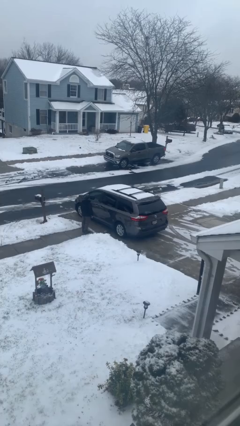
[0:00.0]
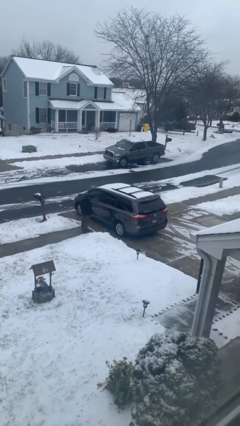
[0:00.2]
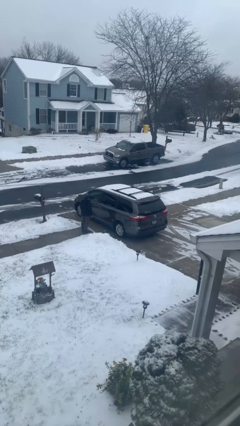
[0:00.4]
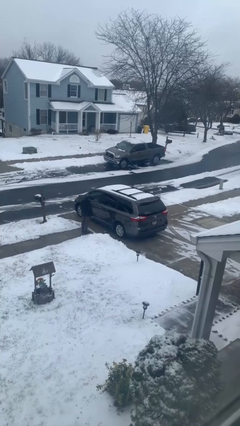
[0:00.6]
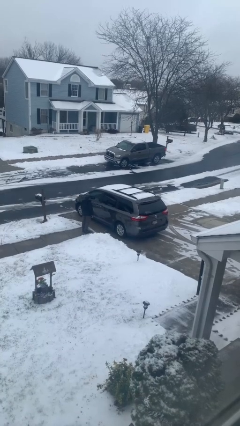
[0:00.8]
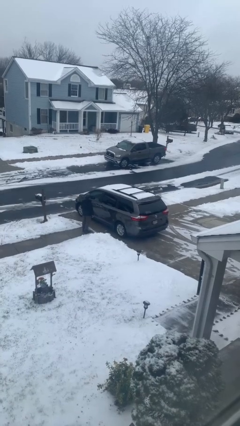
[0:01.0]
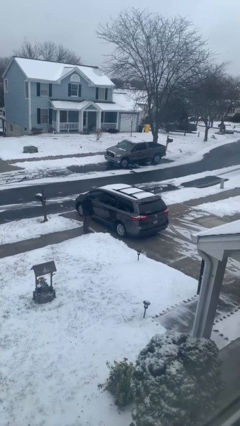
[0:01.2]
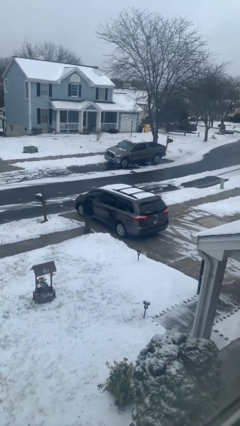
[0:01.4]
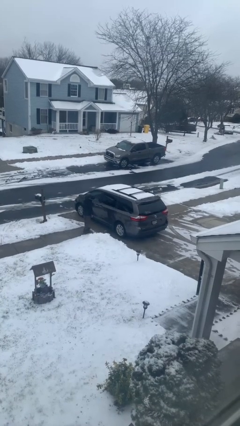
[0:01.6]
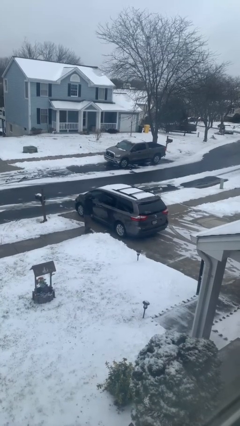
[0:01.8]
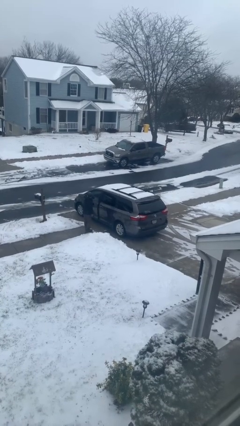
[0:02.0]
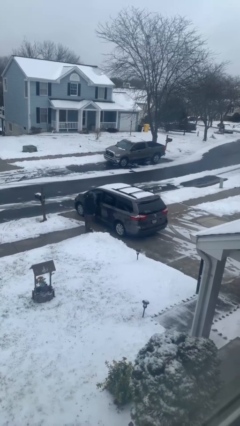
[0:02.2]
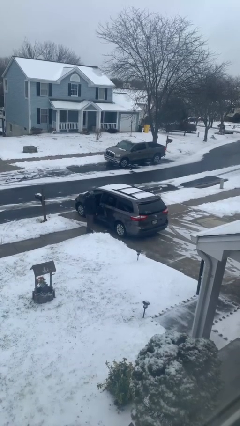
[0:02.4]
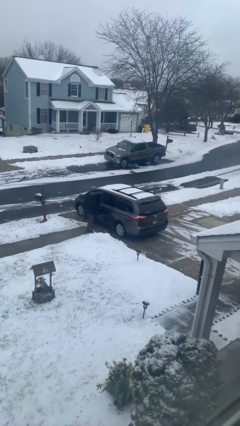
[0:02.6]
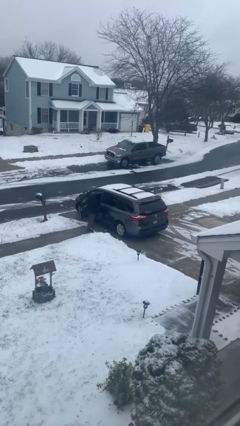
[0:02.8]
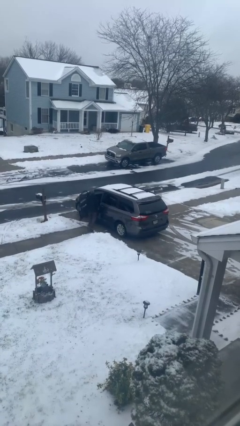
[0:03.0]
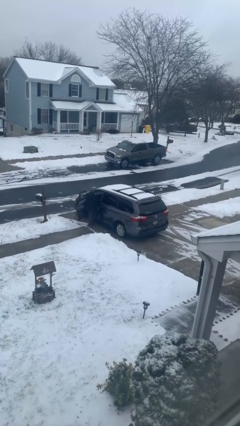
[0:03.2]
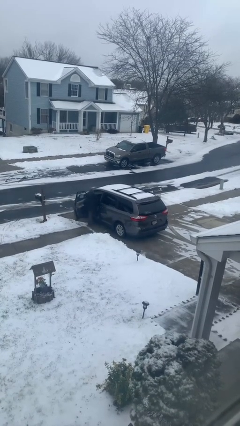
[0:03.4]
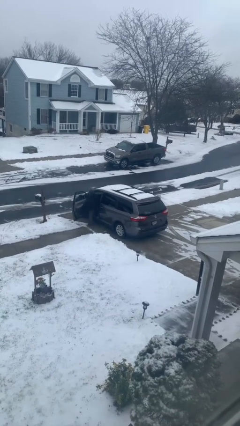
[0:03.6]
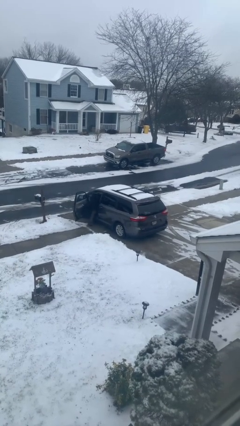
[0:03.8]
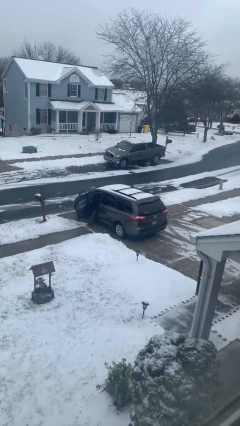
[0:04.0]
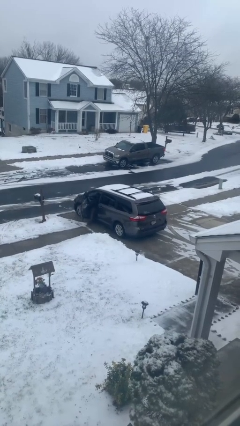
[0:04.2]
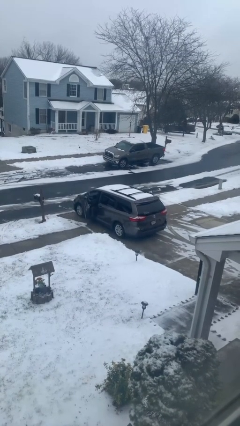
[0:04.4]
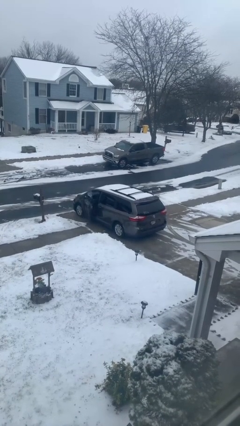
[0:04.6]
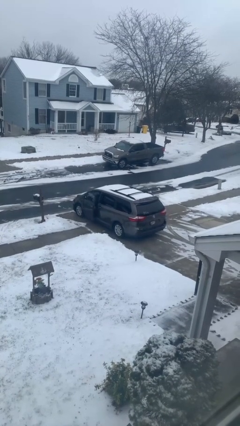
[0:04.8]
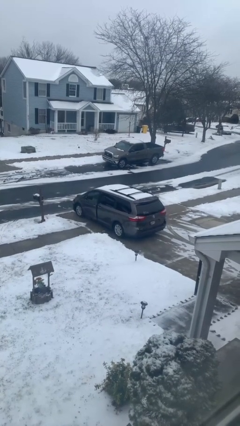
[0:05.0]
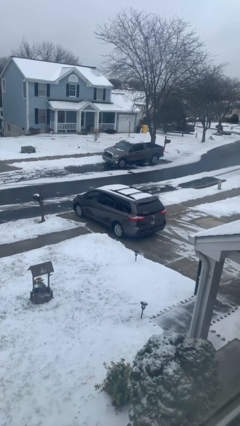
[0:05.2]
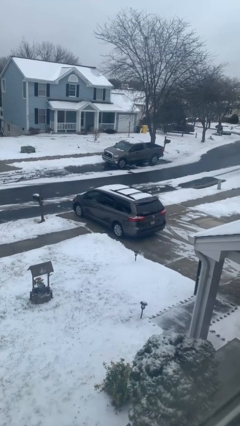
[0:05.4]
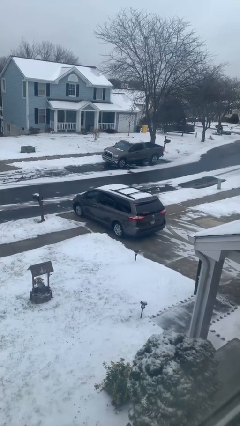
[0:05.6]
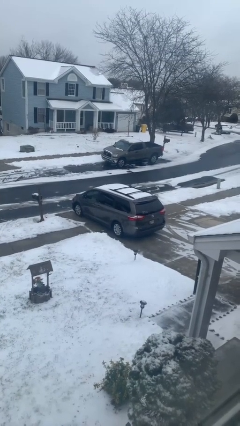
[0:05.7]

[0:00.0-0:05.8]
car picks up person

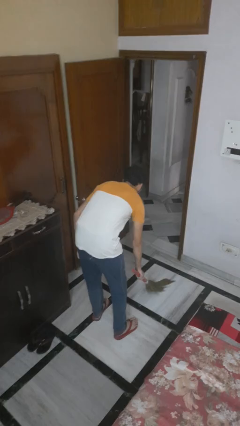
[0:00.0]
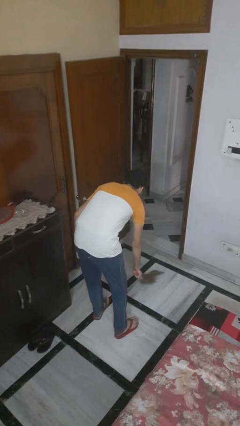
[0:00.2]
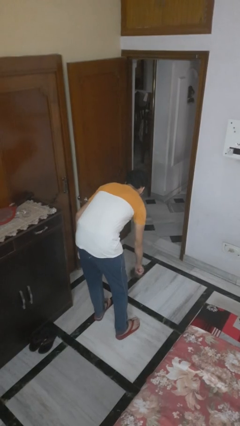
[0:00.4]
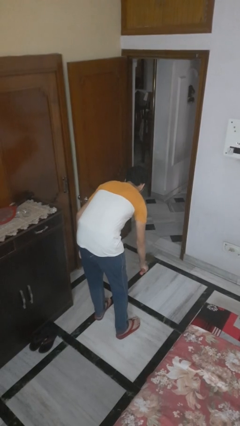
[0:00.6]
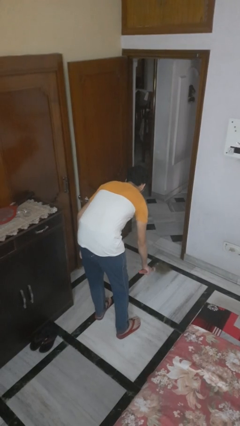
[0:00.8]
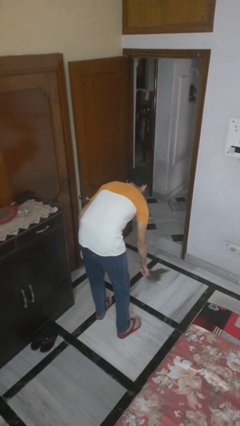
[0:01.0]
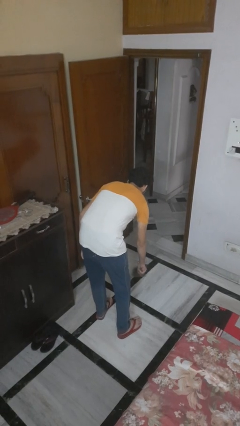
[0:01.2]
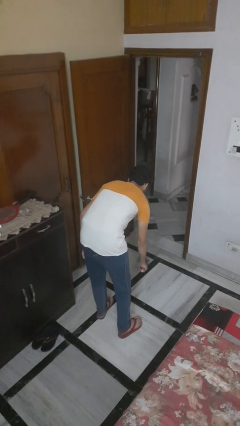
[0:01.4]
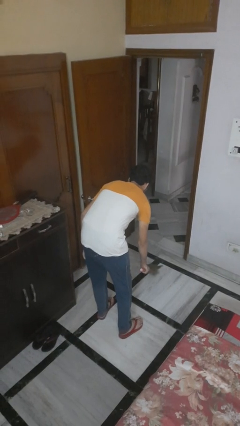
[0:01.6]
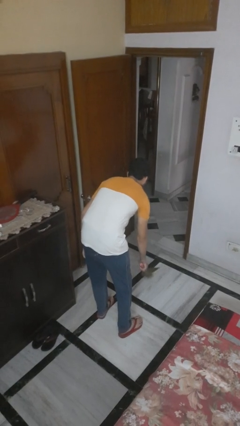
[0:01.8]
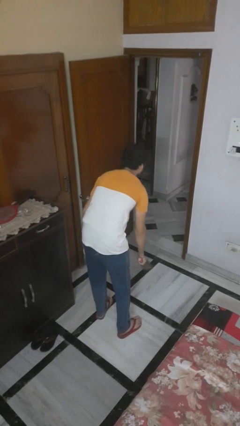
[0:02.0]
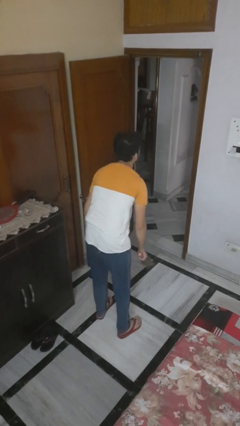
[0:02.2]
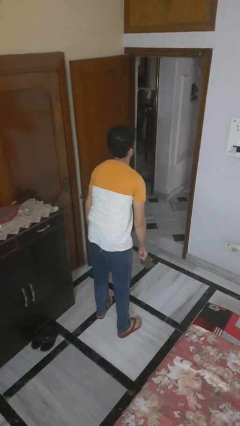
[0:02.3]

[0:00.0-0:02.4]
person sweeps floor

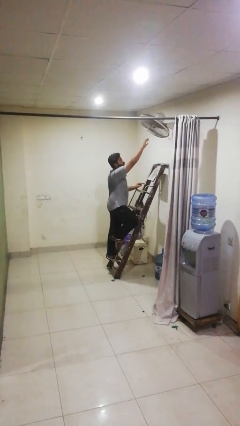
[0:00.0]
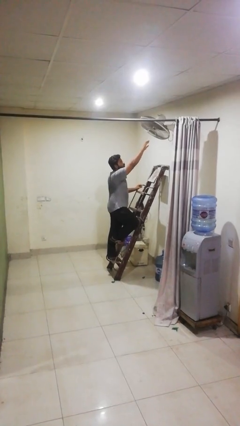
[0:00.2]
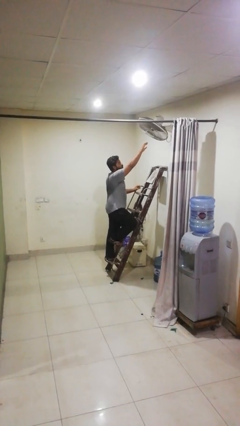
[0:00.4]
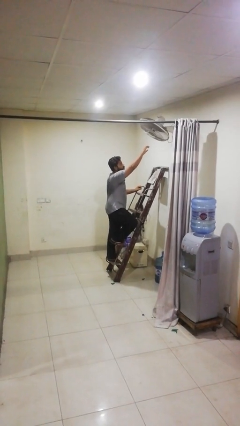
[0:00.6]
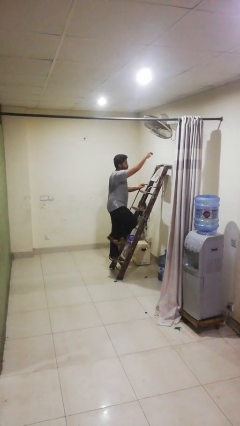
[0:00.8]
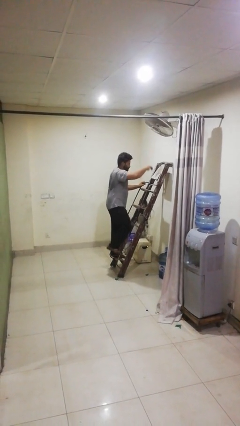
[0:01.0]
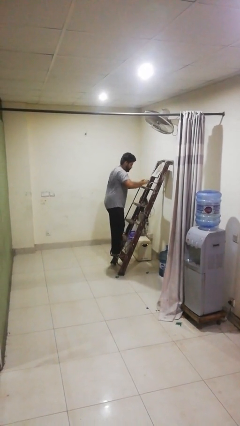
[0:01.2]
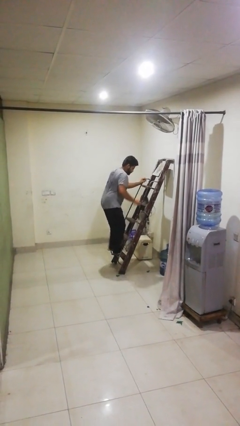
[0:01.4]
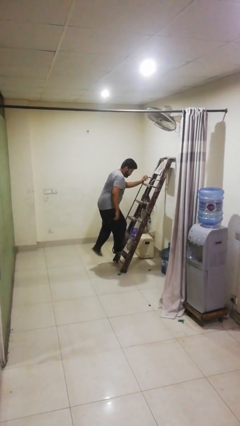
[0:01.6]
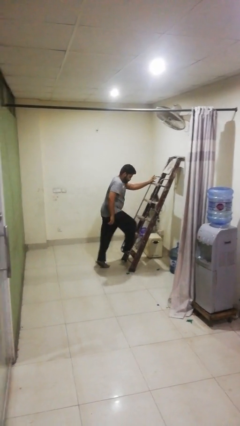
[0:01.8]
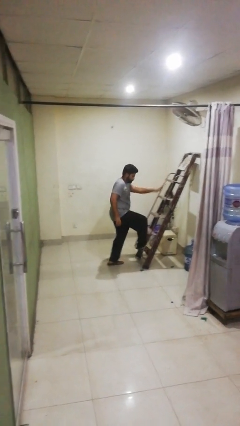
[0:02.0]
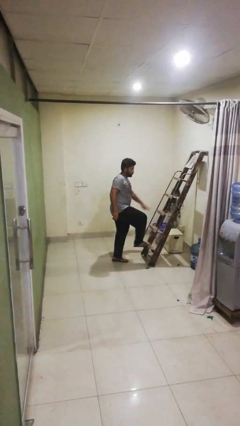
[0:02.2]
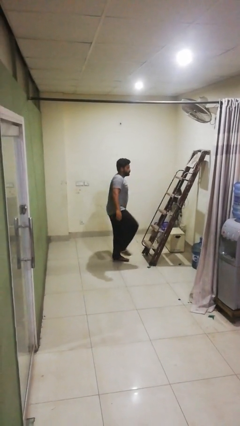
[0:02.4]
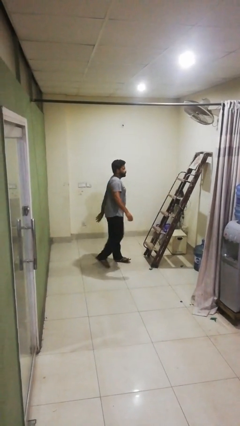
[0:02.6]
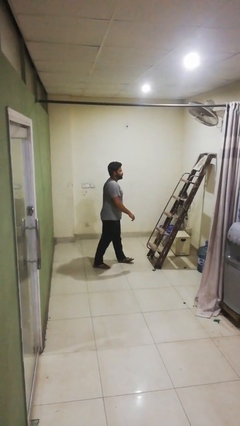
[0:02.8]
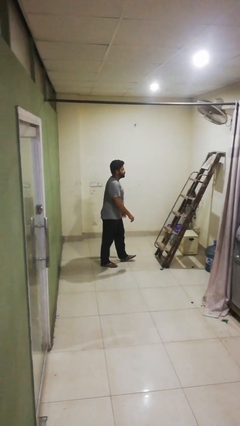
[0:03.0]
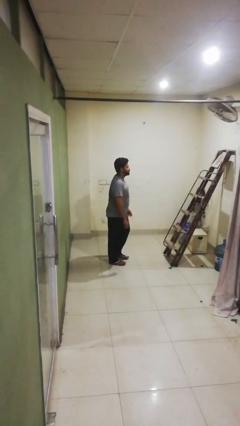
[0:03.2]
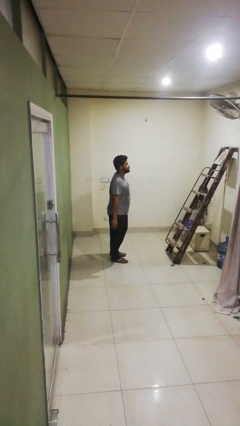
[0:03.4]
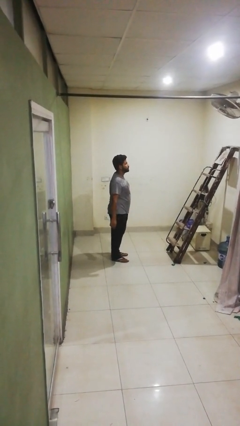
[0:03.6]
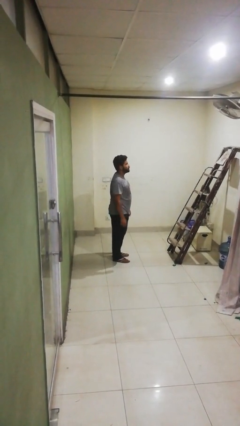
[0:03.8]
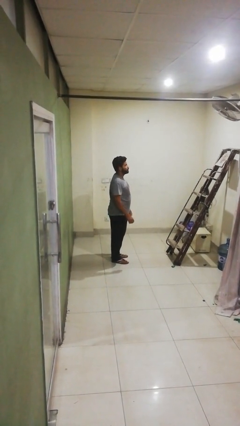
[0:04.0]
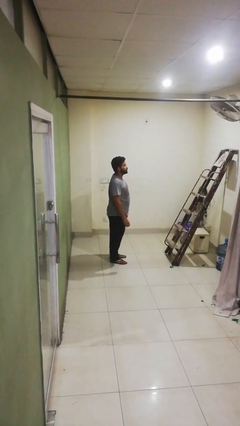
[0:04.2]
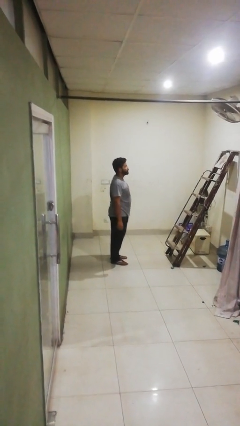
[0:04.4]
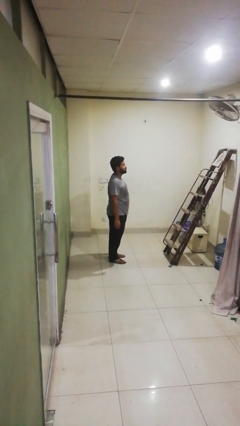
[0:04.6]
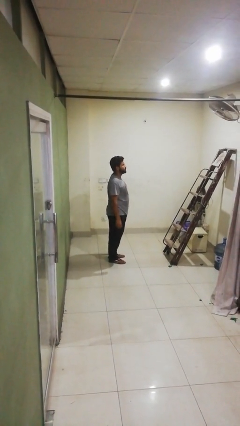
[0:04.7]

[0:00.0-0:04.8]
person climbs down ladder

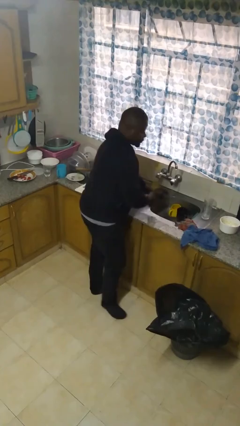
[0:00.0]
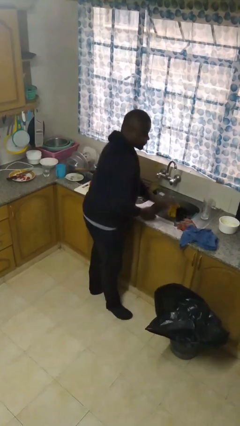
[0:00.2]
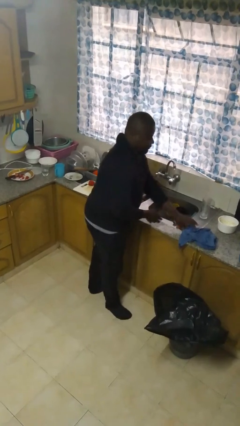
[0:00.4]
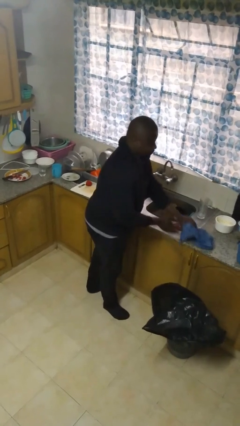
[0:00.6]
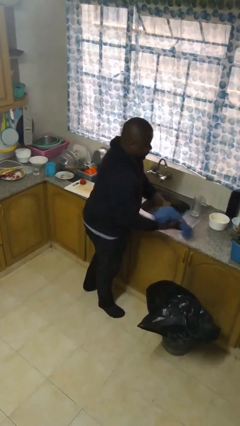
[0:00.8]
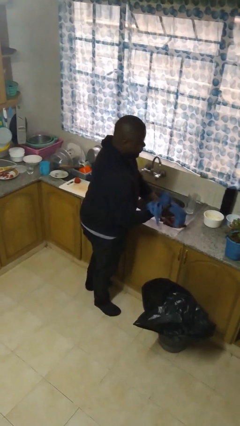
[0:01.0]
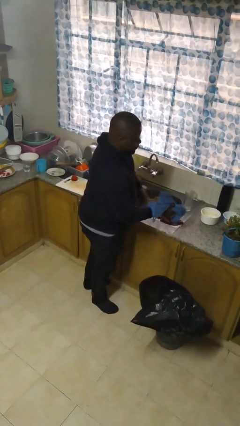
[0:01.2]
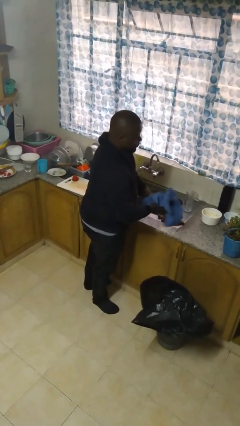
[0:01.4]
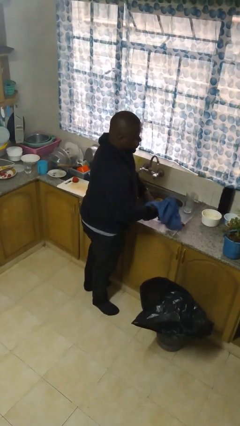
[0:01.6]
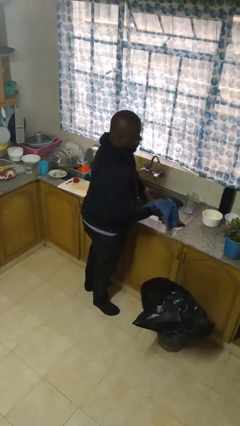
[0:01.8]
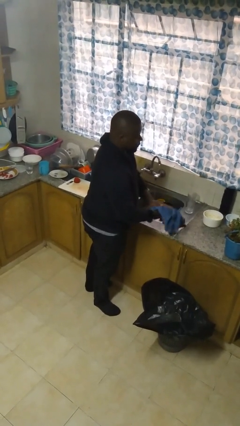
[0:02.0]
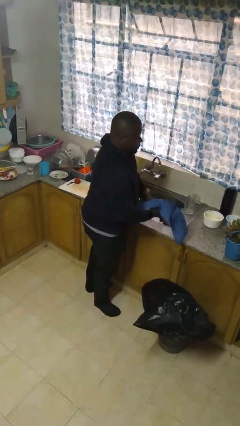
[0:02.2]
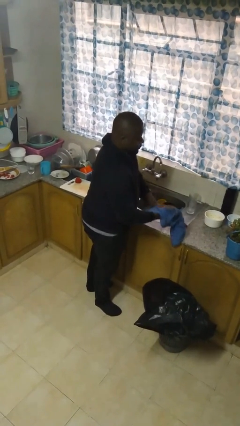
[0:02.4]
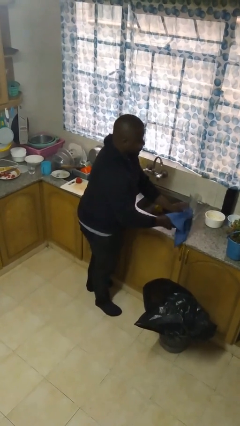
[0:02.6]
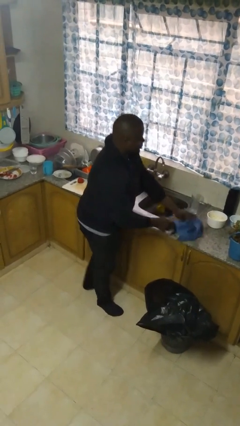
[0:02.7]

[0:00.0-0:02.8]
person dries hands with towel

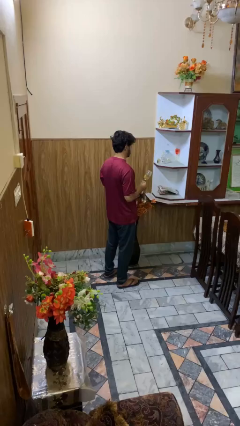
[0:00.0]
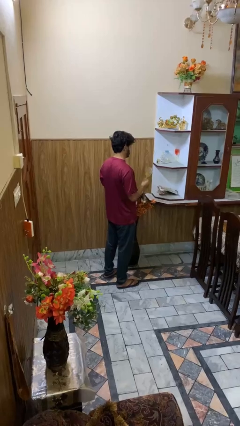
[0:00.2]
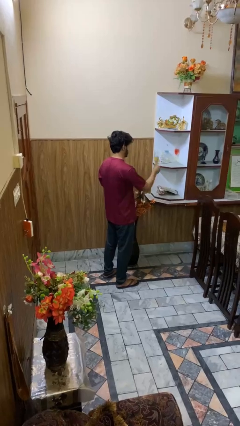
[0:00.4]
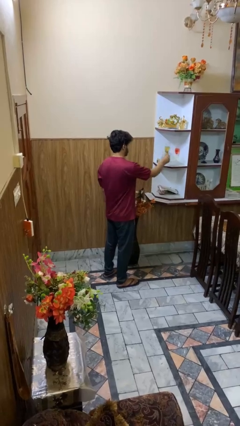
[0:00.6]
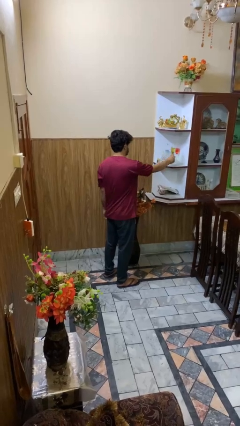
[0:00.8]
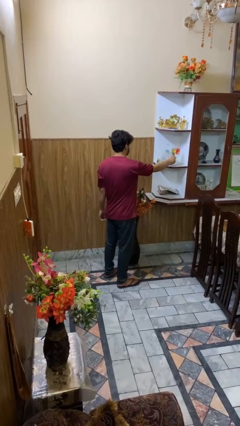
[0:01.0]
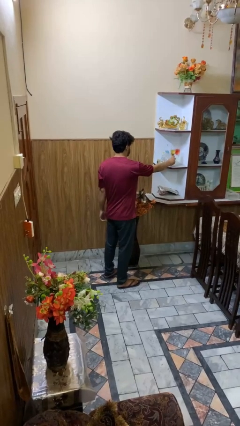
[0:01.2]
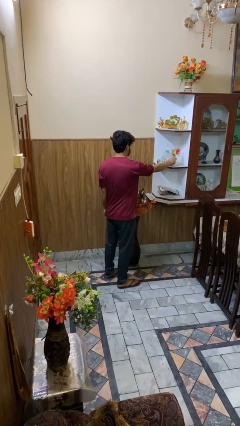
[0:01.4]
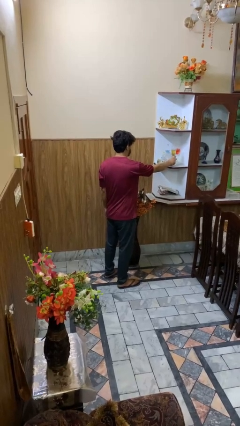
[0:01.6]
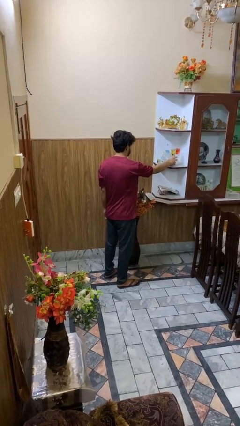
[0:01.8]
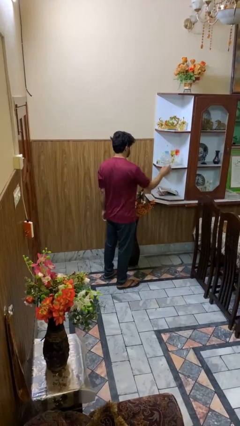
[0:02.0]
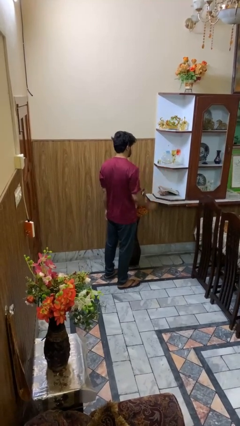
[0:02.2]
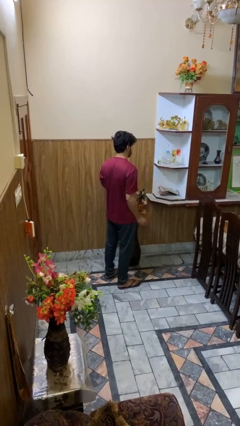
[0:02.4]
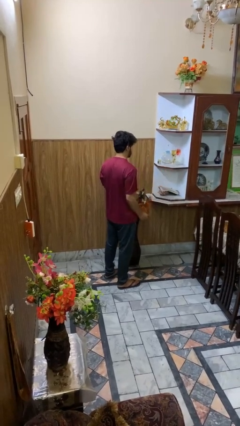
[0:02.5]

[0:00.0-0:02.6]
person puts down object into cabinet
